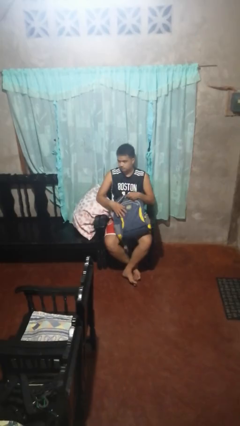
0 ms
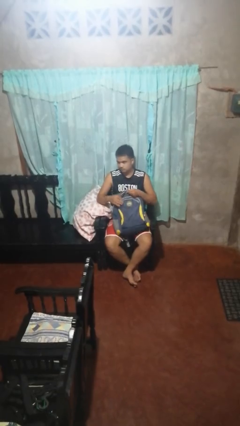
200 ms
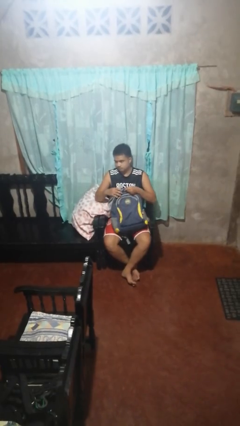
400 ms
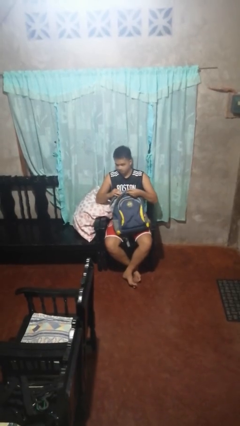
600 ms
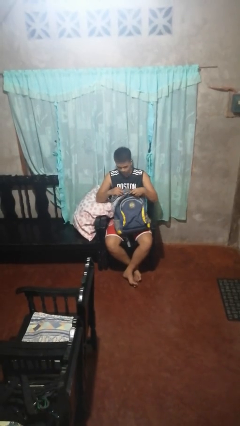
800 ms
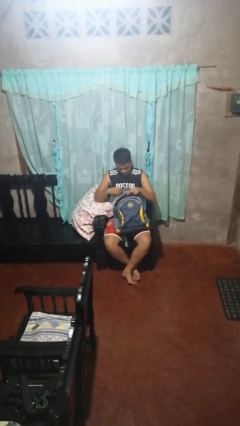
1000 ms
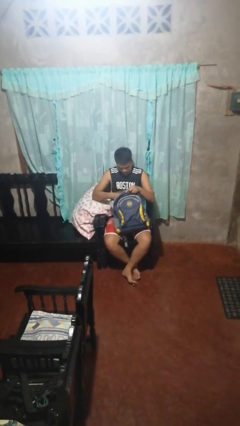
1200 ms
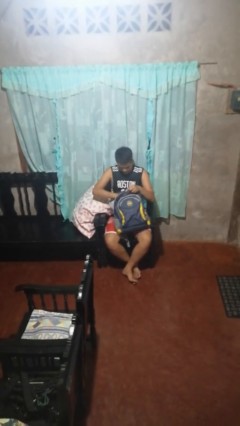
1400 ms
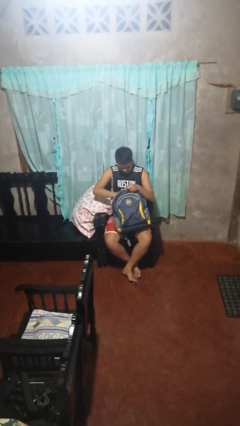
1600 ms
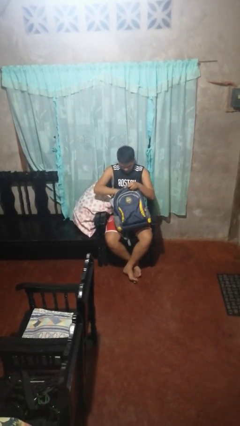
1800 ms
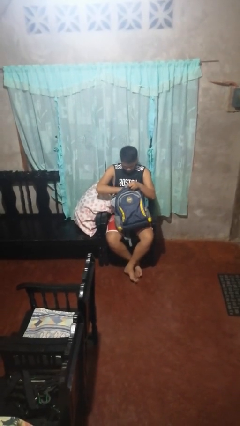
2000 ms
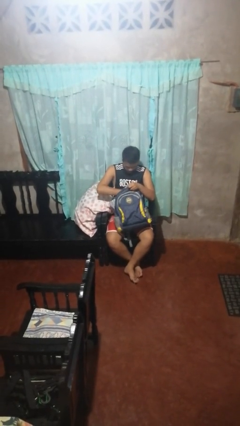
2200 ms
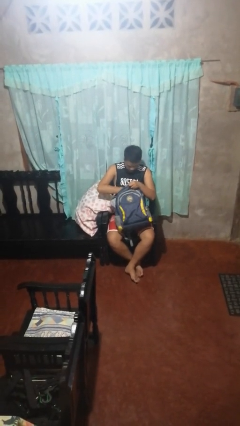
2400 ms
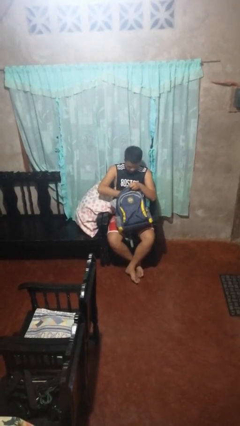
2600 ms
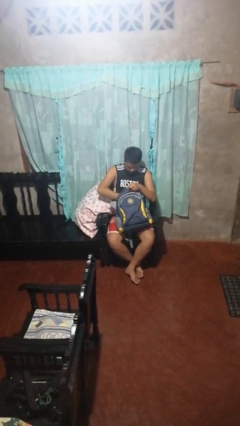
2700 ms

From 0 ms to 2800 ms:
person searches in backpack

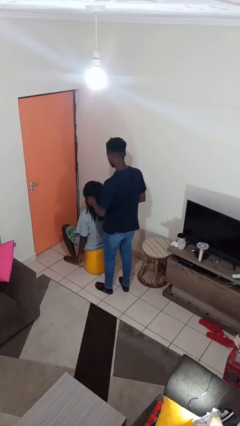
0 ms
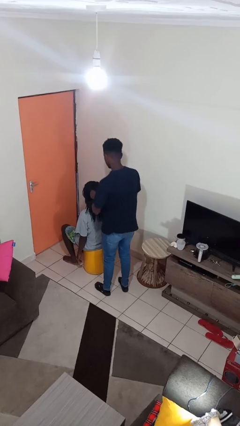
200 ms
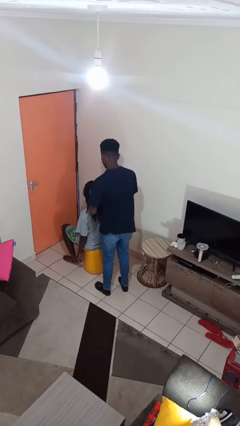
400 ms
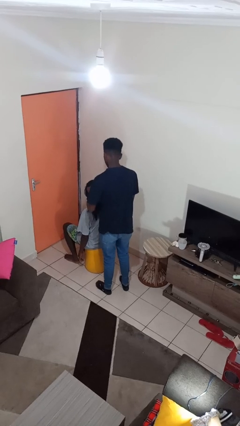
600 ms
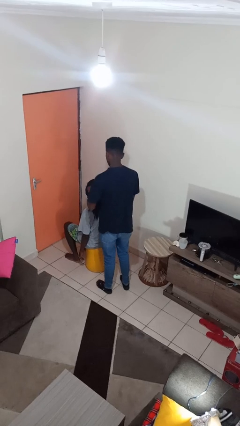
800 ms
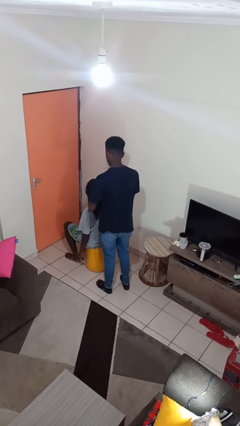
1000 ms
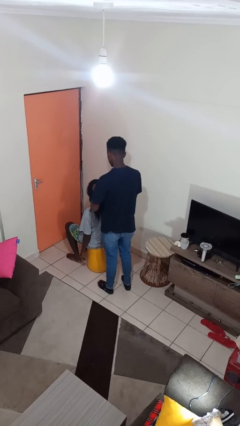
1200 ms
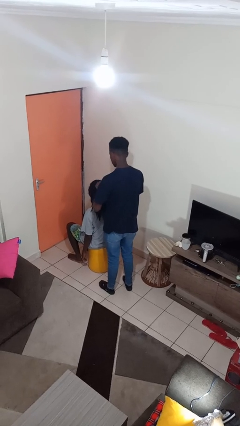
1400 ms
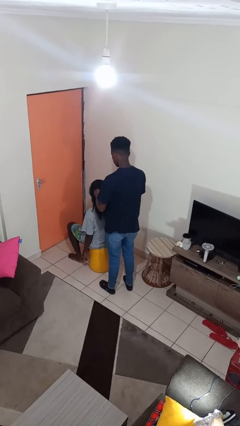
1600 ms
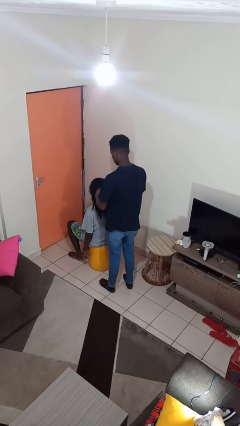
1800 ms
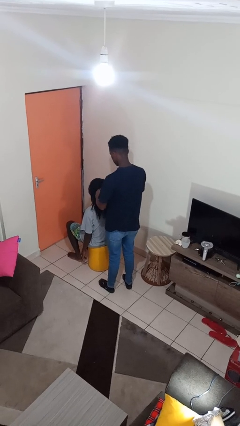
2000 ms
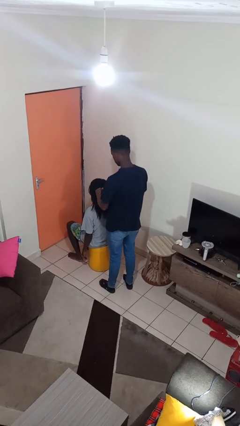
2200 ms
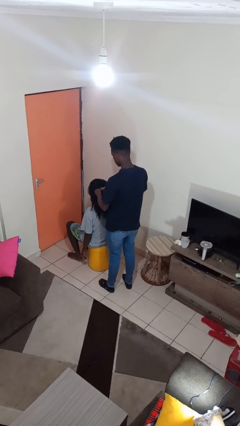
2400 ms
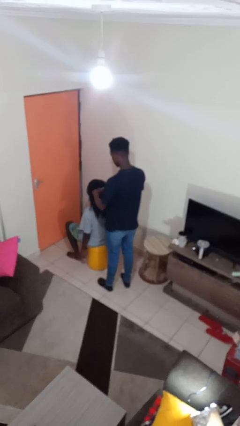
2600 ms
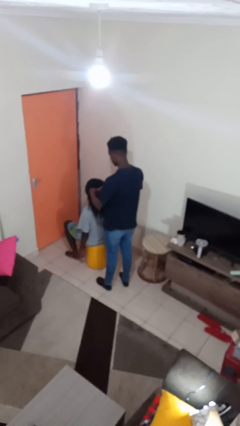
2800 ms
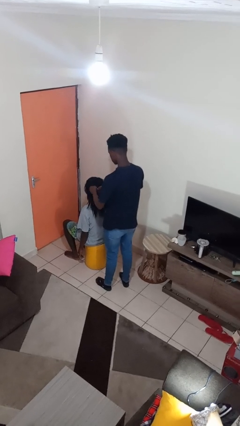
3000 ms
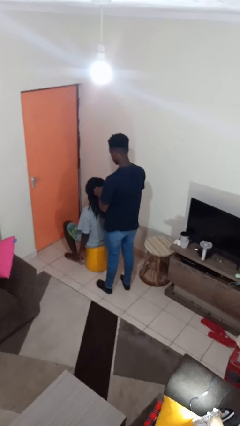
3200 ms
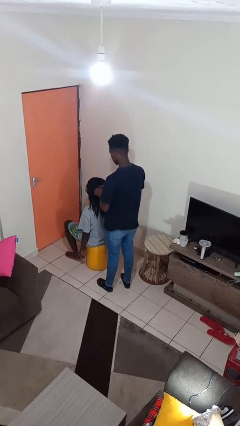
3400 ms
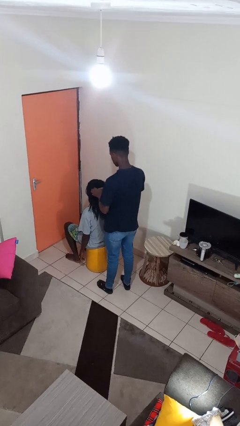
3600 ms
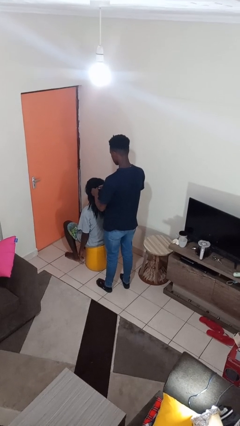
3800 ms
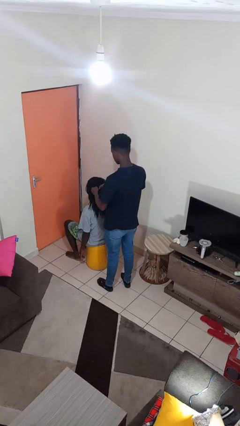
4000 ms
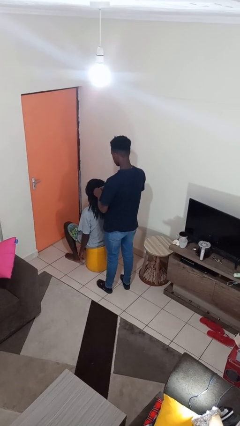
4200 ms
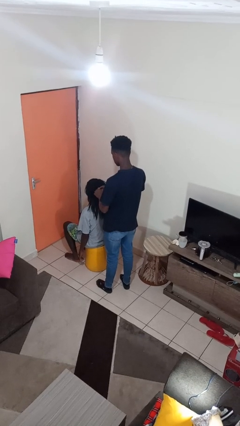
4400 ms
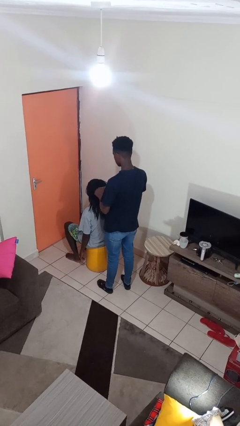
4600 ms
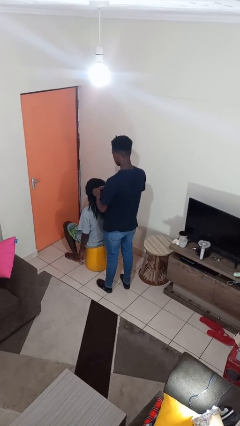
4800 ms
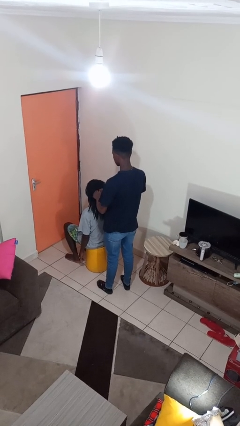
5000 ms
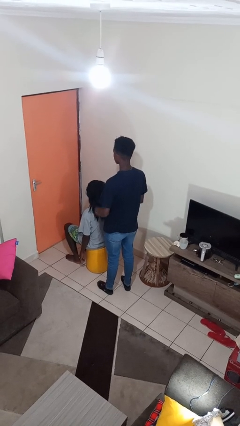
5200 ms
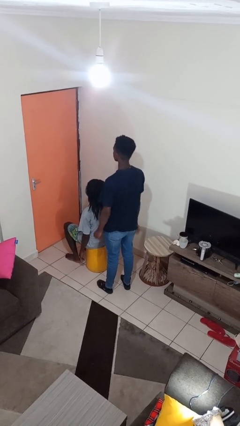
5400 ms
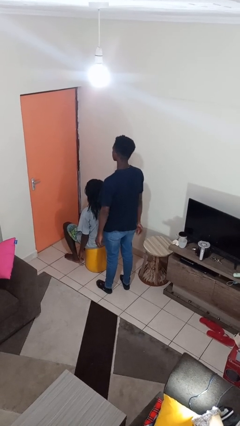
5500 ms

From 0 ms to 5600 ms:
person braids hair of person

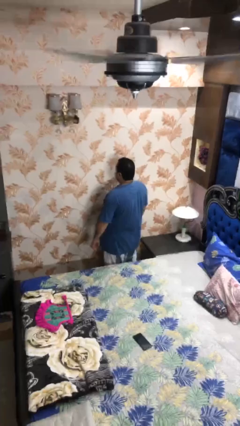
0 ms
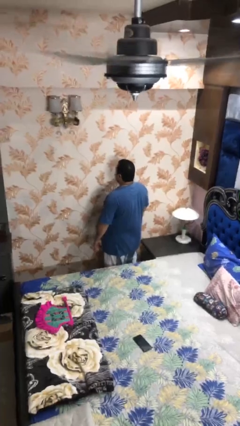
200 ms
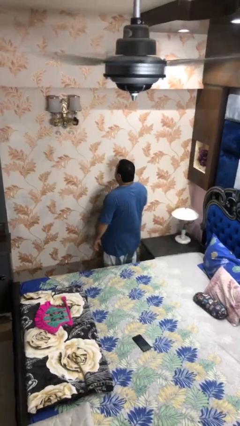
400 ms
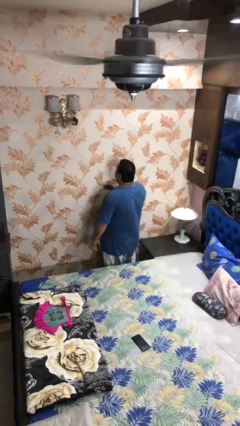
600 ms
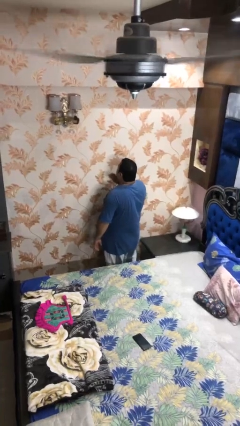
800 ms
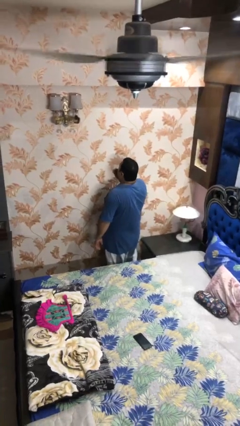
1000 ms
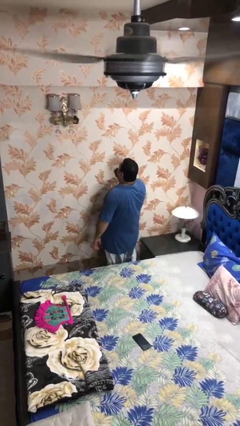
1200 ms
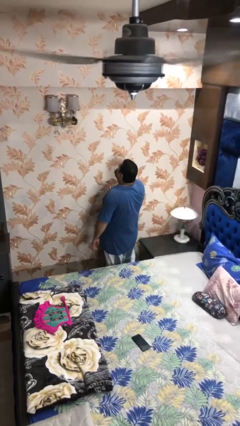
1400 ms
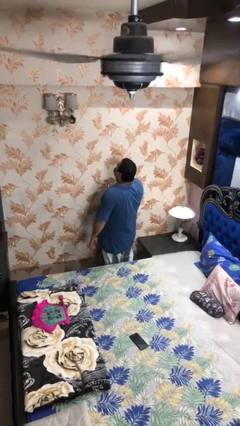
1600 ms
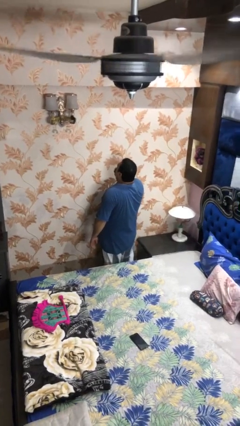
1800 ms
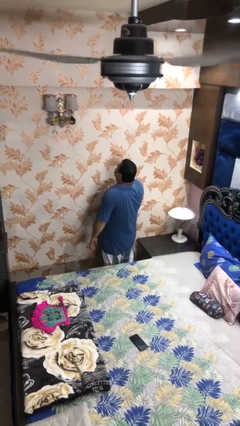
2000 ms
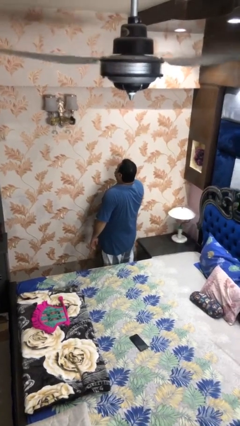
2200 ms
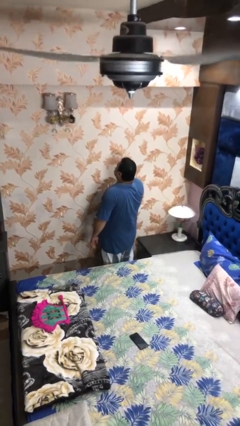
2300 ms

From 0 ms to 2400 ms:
person yawns

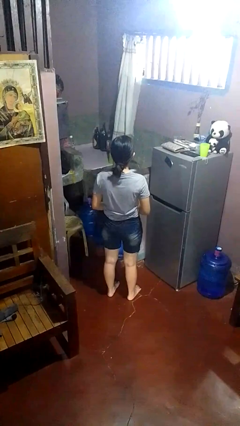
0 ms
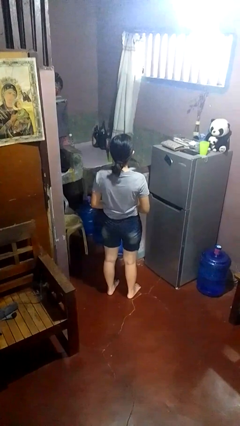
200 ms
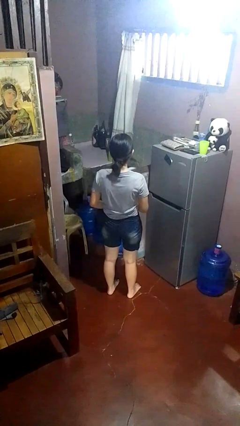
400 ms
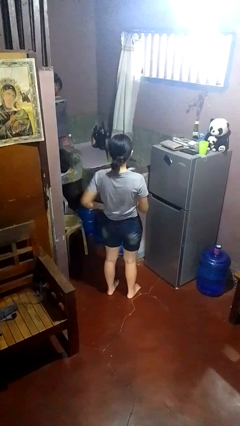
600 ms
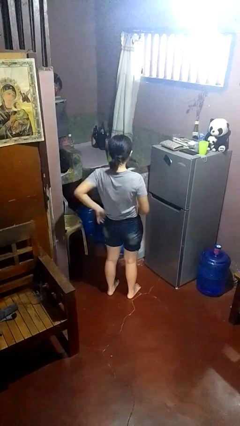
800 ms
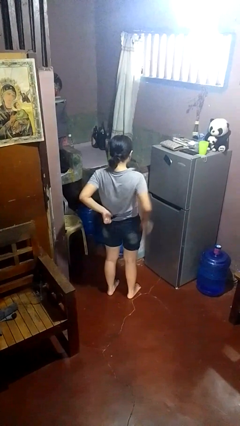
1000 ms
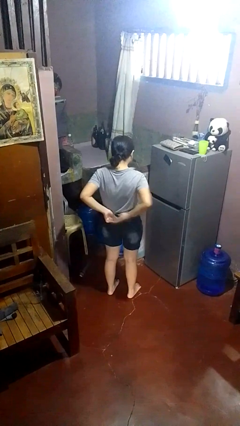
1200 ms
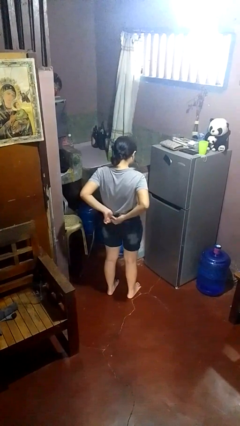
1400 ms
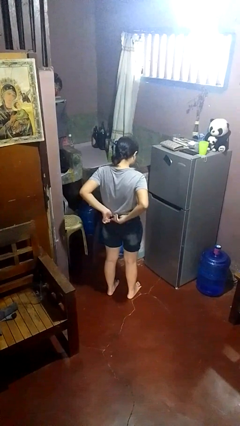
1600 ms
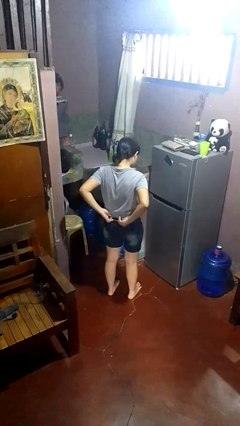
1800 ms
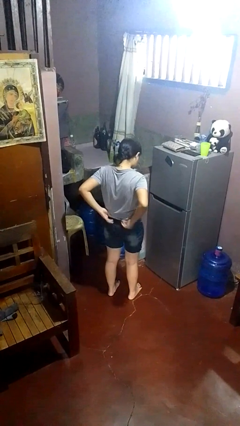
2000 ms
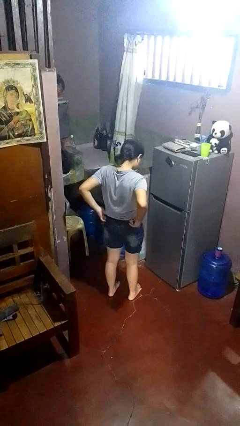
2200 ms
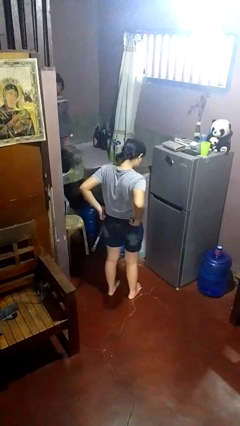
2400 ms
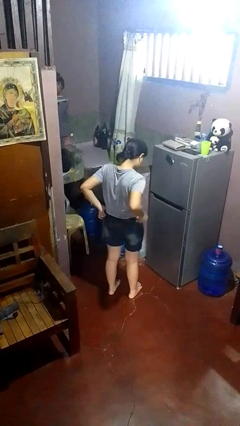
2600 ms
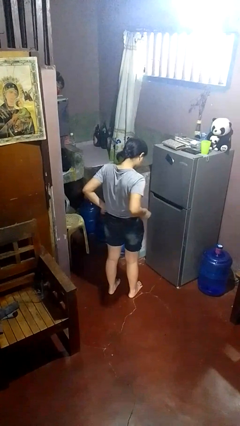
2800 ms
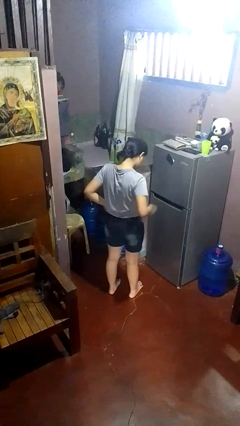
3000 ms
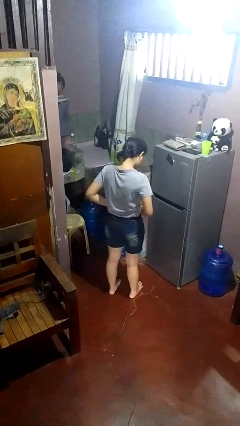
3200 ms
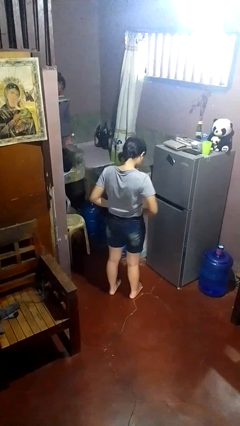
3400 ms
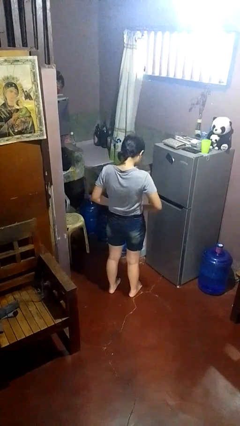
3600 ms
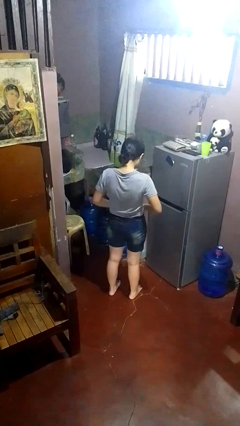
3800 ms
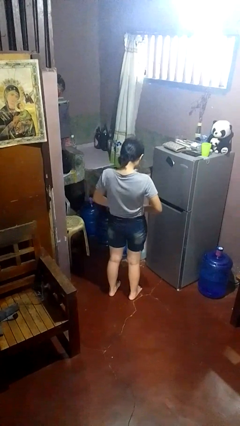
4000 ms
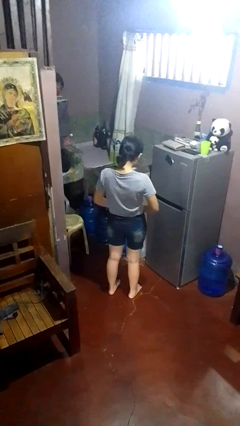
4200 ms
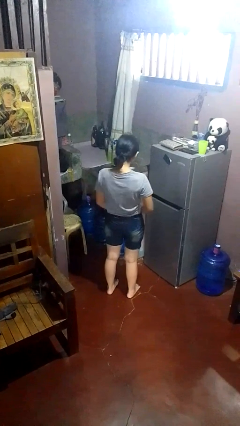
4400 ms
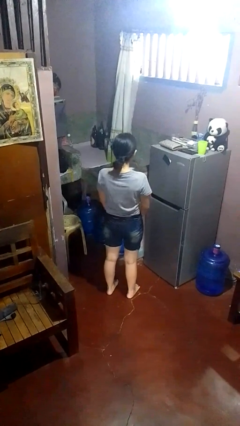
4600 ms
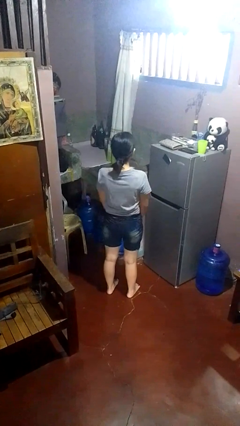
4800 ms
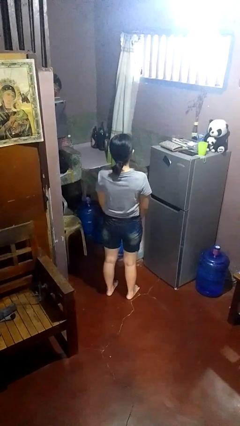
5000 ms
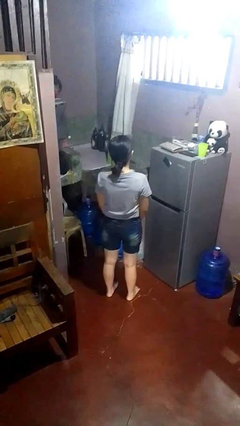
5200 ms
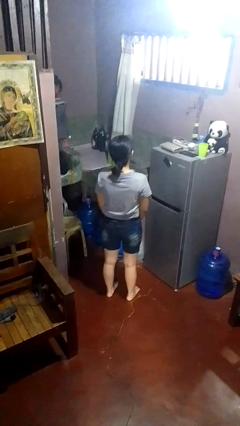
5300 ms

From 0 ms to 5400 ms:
person puts on belt

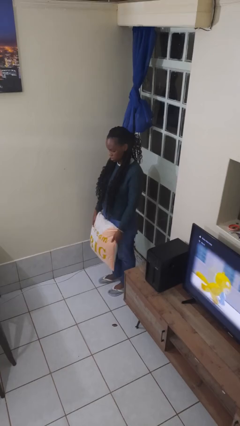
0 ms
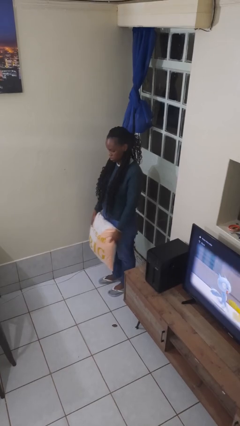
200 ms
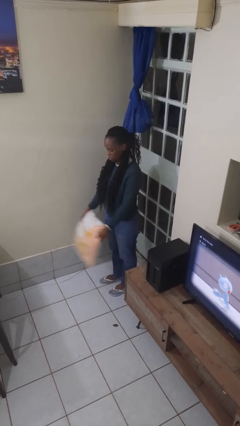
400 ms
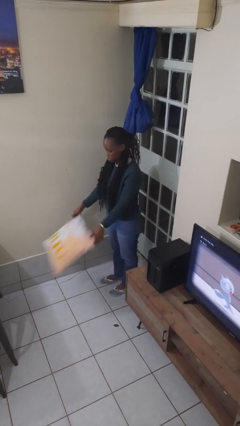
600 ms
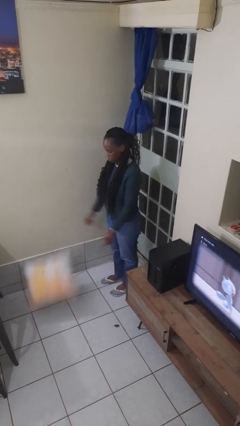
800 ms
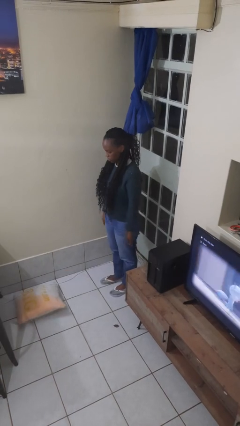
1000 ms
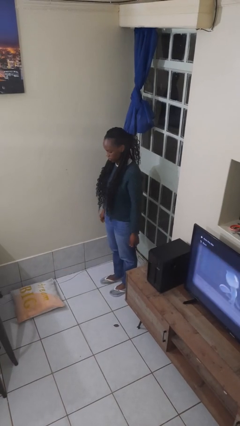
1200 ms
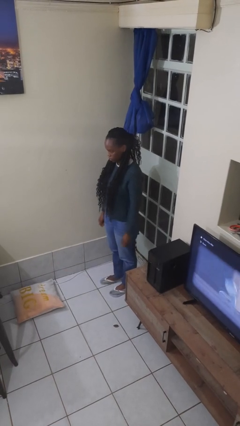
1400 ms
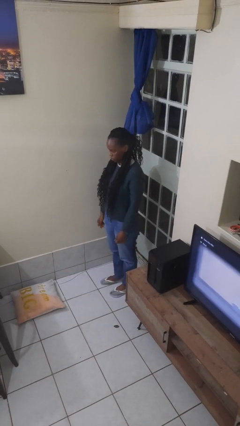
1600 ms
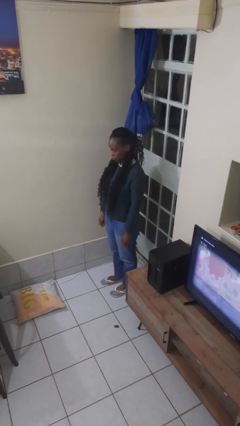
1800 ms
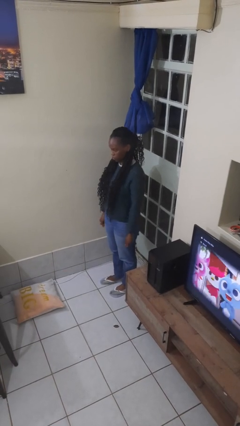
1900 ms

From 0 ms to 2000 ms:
person throws object to ground
